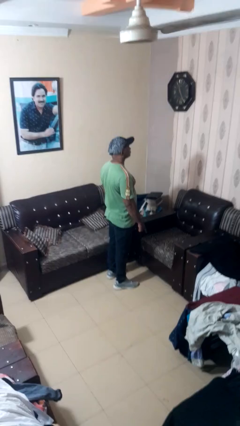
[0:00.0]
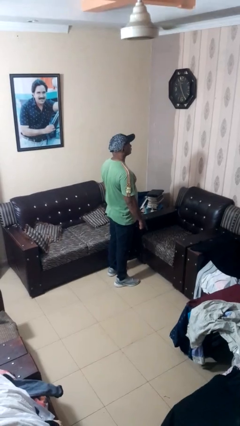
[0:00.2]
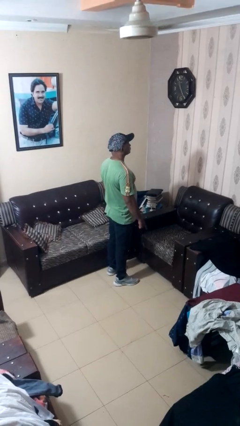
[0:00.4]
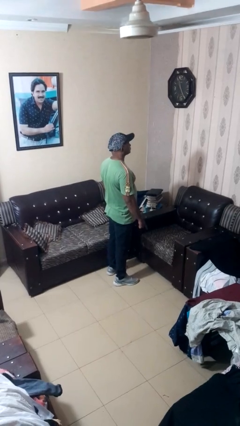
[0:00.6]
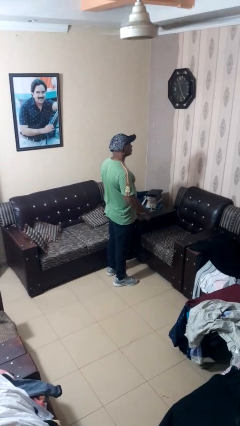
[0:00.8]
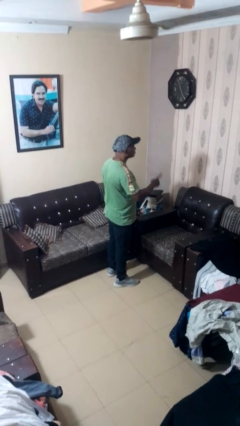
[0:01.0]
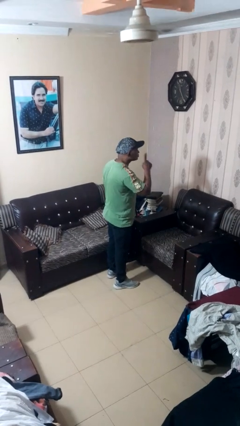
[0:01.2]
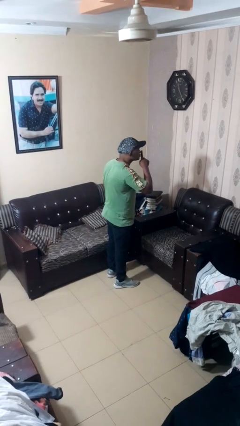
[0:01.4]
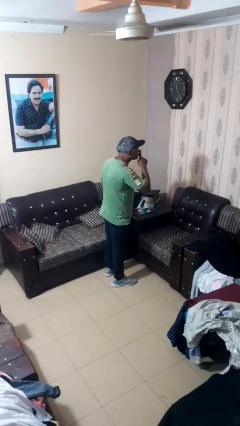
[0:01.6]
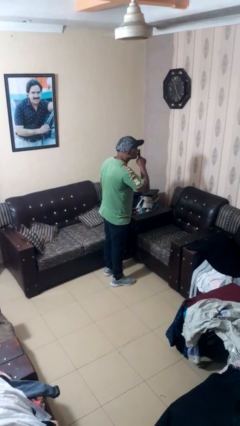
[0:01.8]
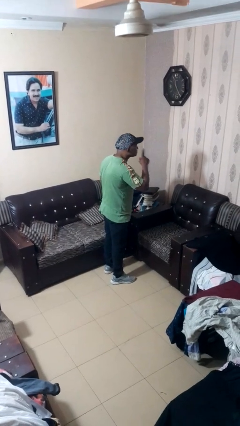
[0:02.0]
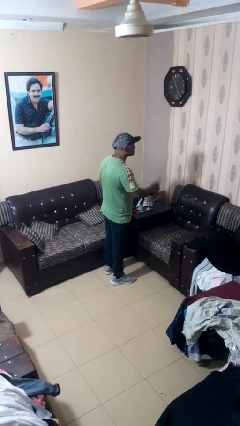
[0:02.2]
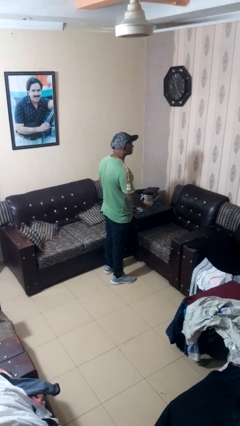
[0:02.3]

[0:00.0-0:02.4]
person gestures be quiet

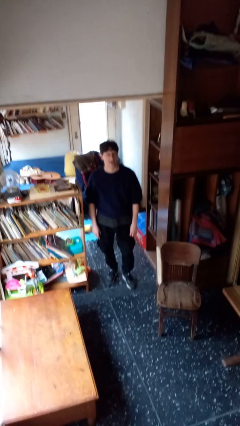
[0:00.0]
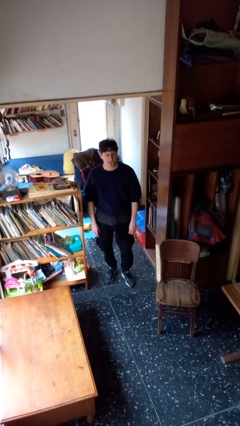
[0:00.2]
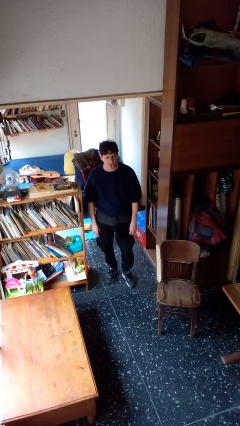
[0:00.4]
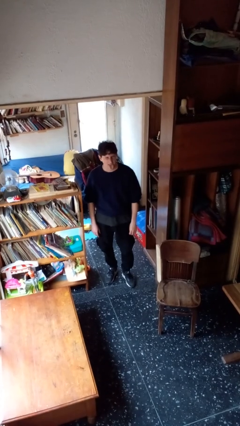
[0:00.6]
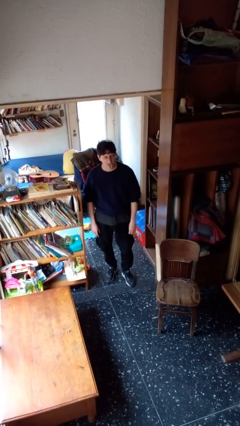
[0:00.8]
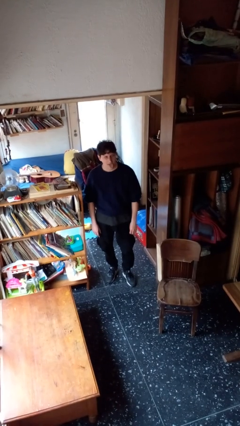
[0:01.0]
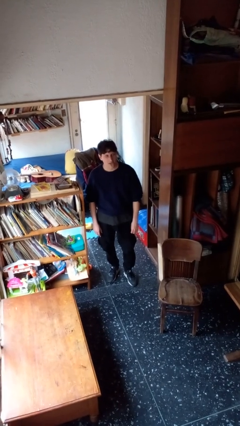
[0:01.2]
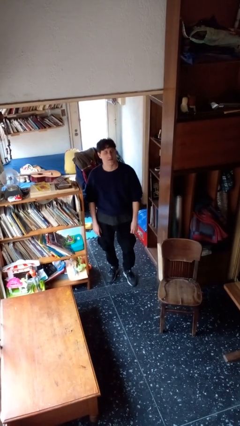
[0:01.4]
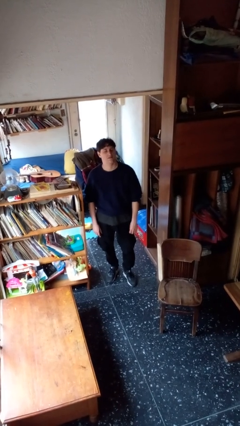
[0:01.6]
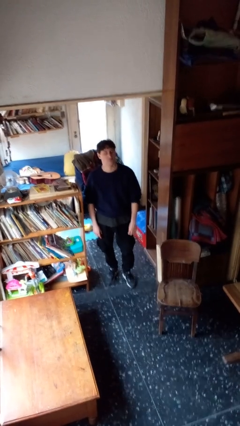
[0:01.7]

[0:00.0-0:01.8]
person sticks out tongue

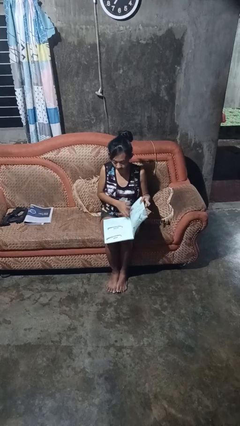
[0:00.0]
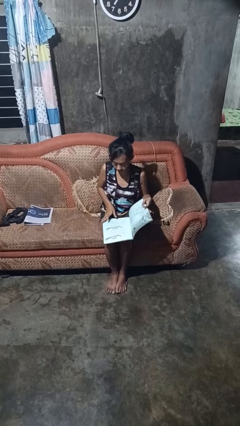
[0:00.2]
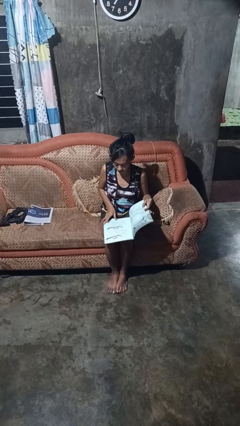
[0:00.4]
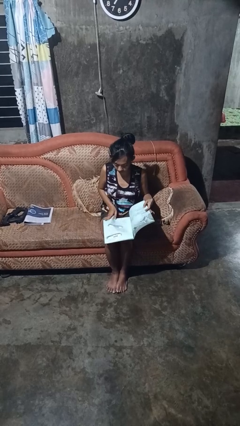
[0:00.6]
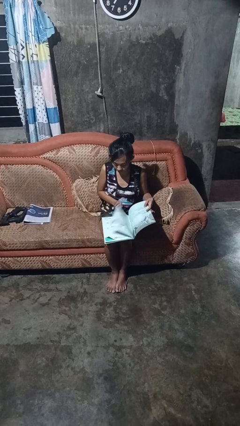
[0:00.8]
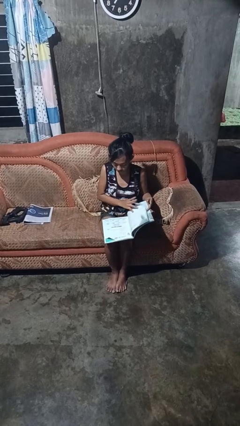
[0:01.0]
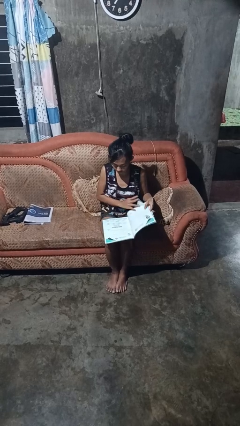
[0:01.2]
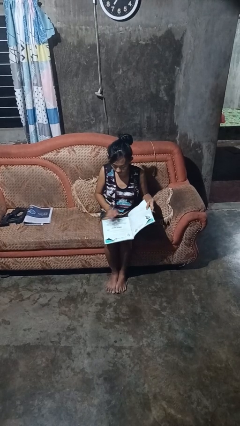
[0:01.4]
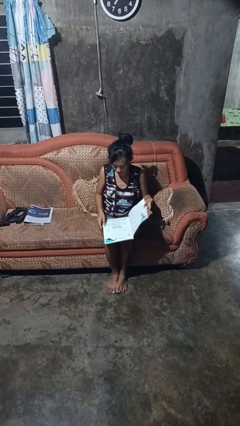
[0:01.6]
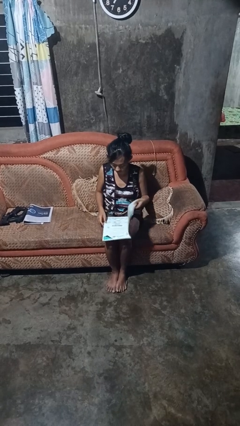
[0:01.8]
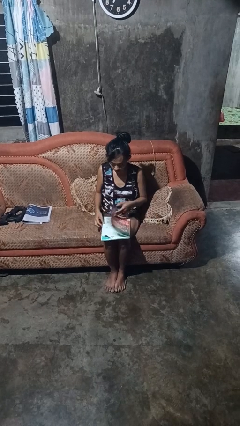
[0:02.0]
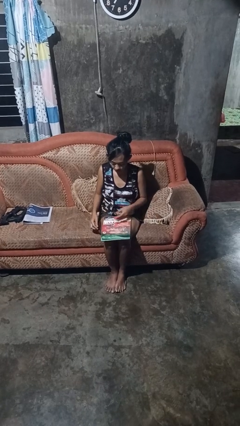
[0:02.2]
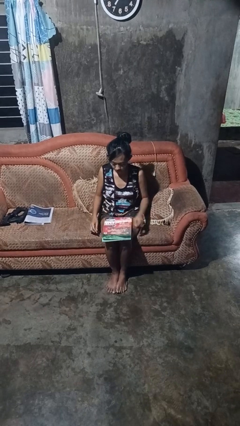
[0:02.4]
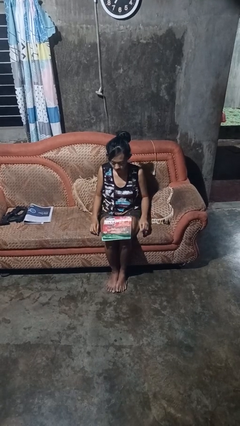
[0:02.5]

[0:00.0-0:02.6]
person reads magazine

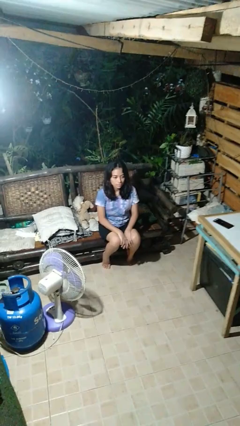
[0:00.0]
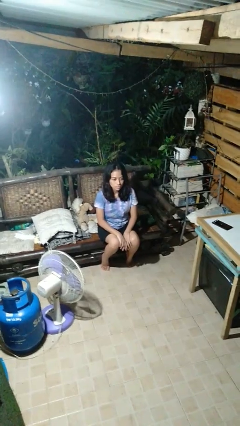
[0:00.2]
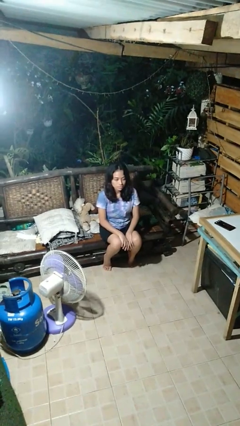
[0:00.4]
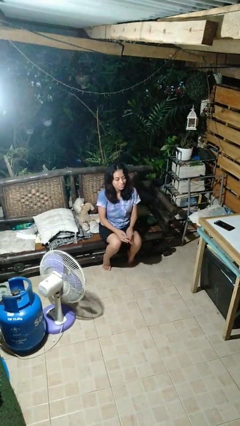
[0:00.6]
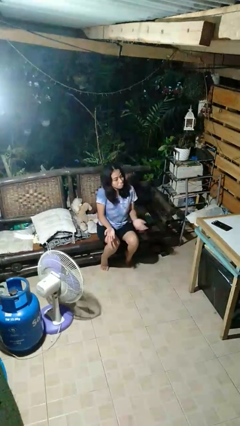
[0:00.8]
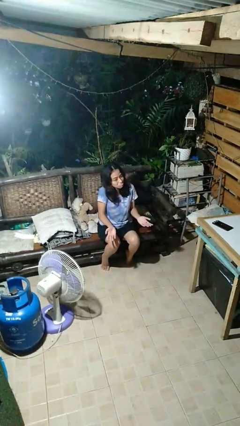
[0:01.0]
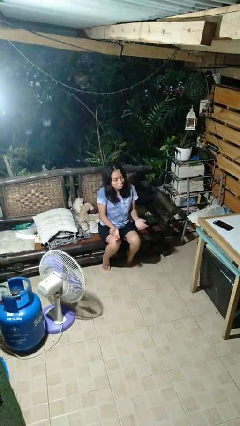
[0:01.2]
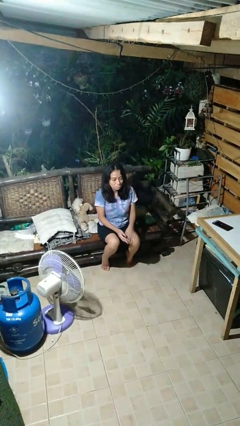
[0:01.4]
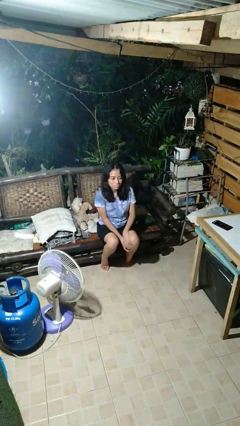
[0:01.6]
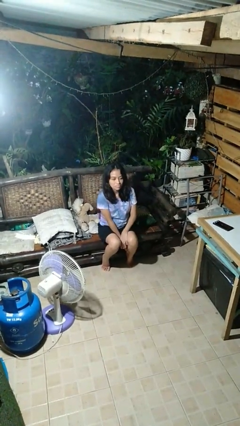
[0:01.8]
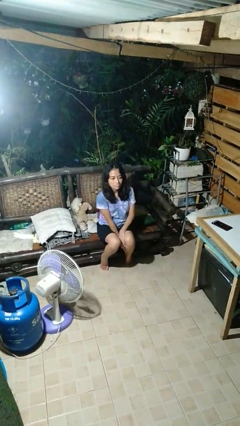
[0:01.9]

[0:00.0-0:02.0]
person shrugs

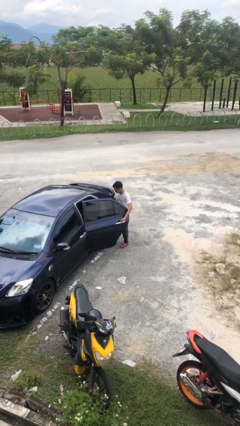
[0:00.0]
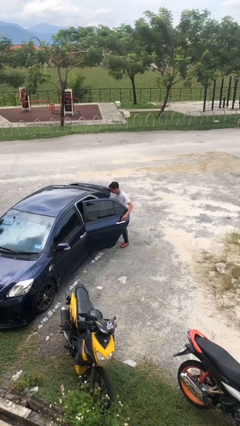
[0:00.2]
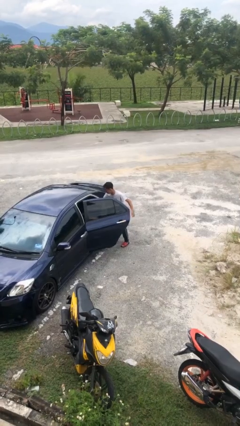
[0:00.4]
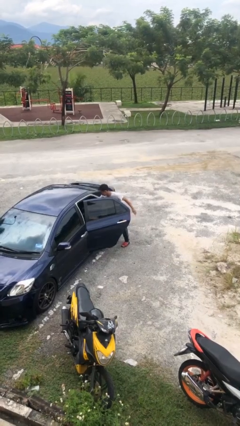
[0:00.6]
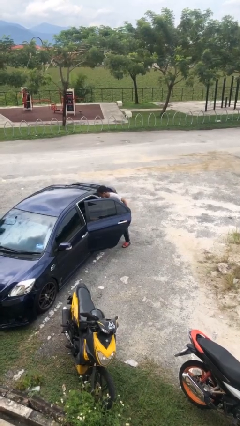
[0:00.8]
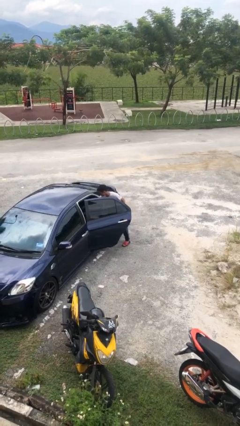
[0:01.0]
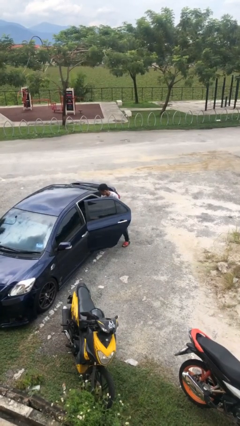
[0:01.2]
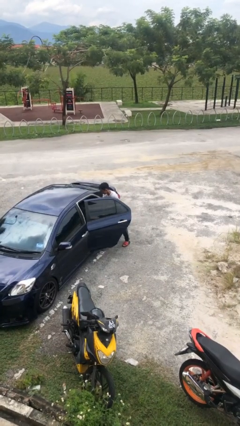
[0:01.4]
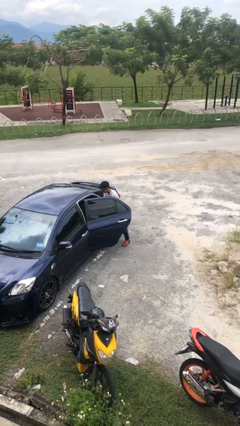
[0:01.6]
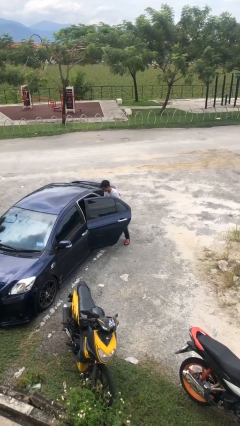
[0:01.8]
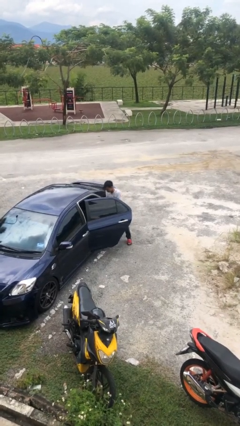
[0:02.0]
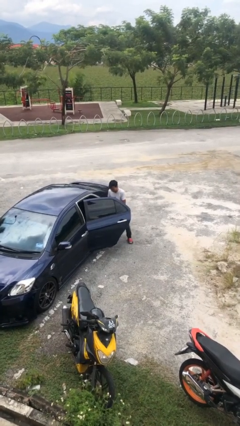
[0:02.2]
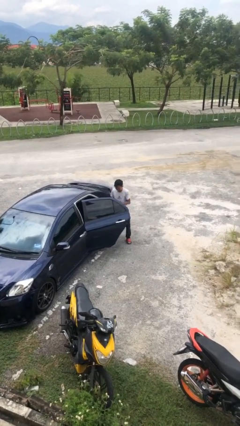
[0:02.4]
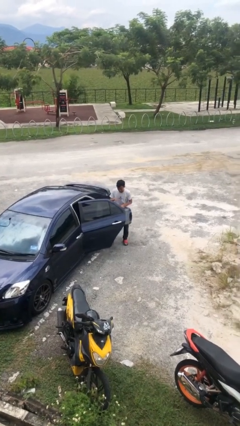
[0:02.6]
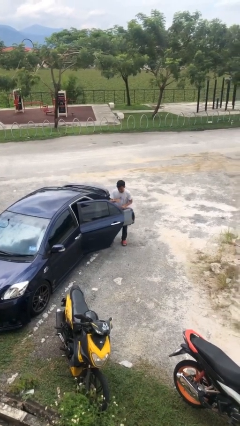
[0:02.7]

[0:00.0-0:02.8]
person unloads car

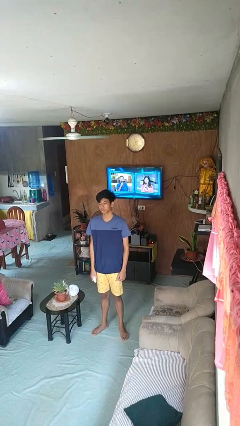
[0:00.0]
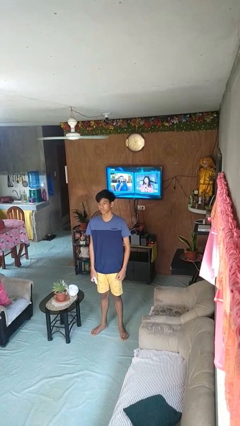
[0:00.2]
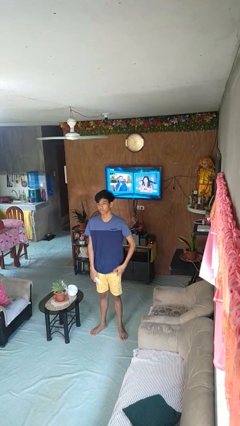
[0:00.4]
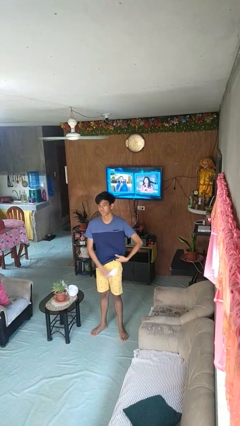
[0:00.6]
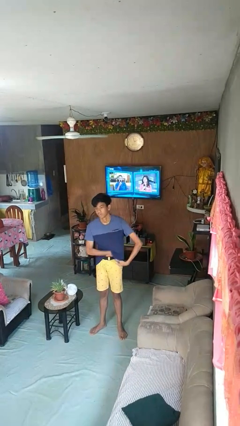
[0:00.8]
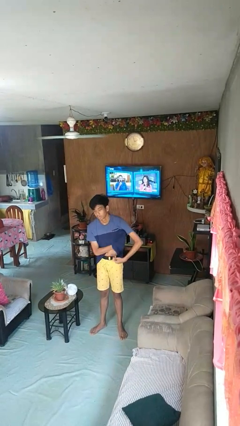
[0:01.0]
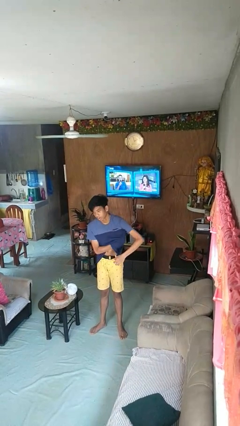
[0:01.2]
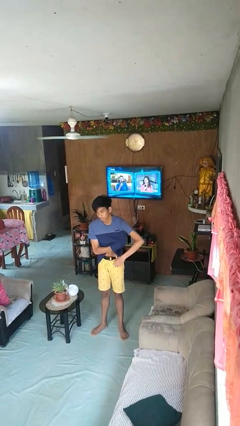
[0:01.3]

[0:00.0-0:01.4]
person applies deodorant

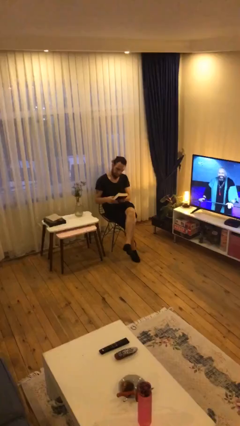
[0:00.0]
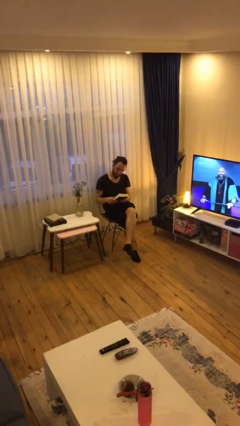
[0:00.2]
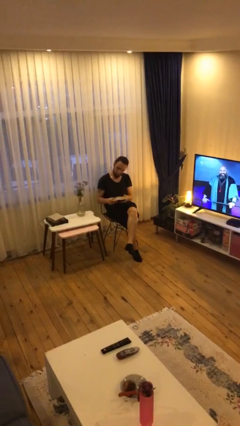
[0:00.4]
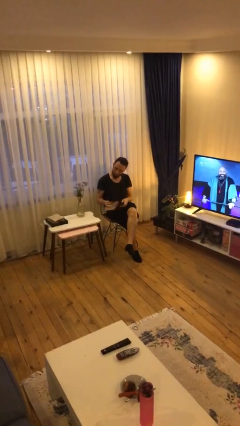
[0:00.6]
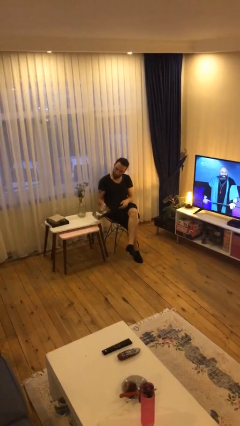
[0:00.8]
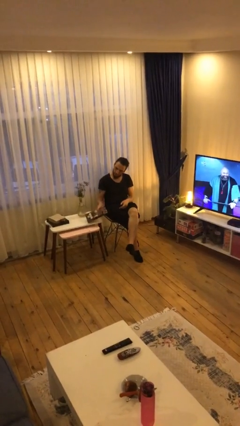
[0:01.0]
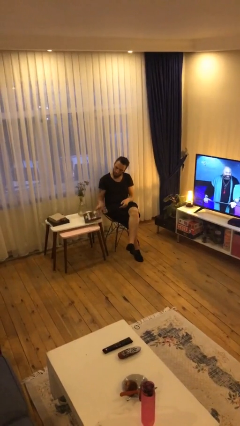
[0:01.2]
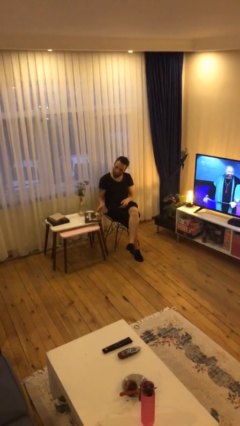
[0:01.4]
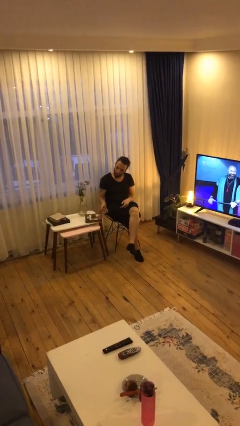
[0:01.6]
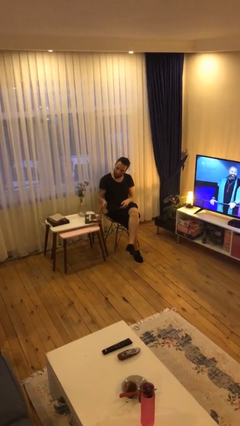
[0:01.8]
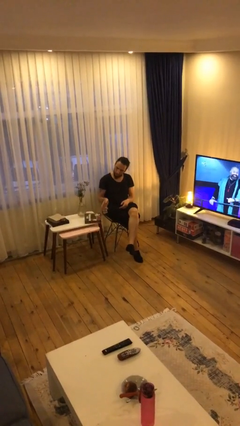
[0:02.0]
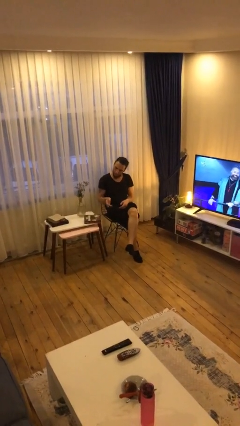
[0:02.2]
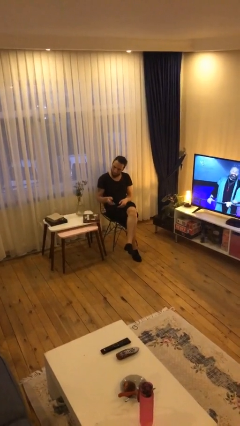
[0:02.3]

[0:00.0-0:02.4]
person puts down object on table

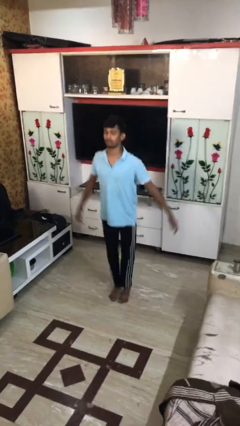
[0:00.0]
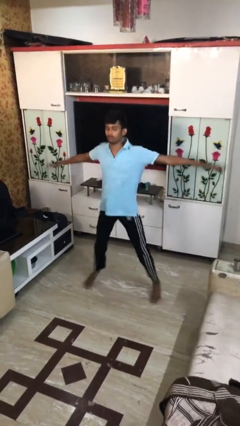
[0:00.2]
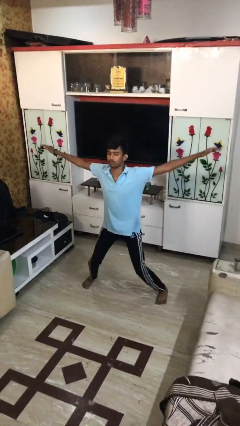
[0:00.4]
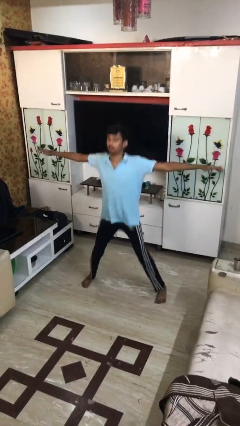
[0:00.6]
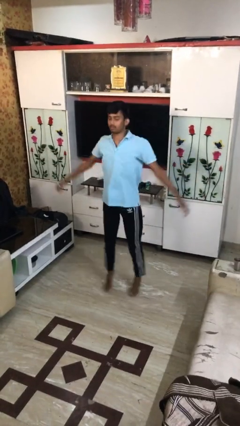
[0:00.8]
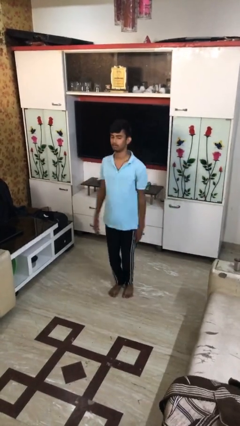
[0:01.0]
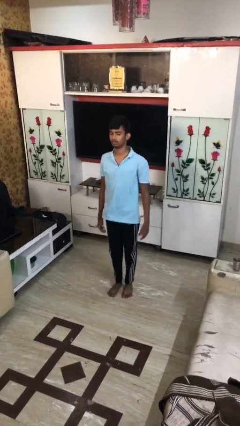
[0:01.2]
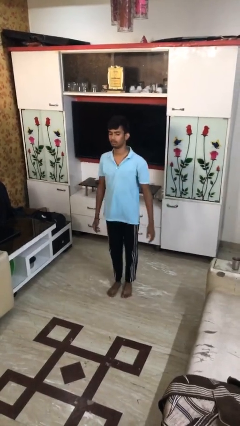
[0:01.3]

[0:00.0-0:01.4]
person exercises with jumping jacks
